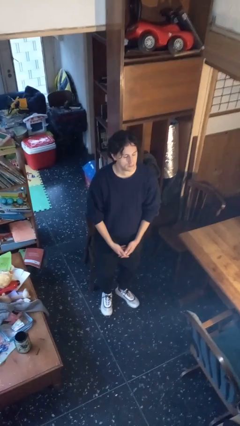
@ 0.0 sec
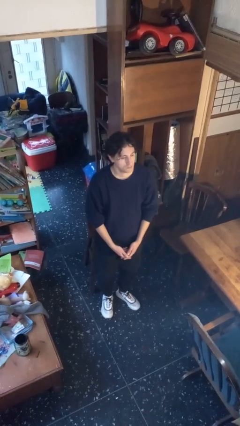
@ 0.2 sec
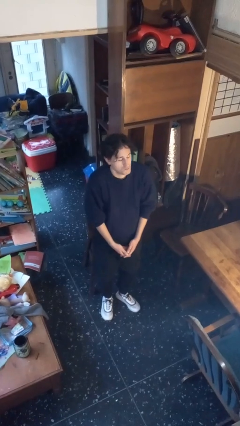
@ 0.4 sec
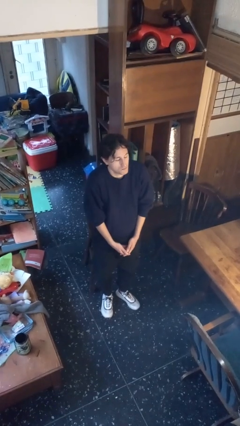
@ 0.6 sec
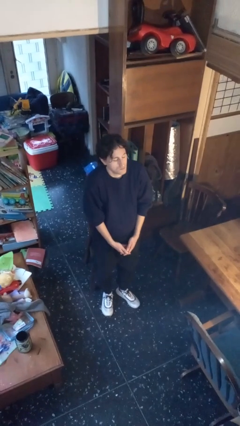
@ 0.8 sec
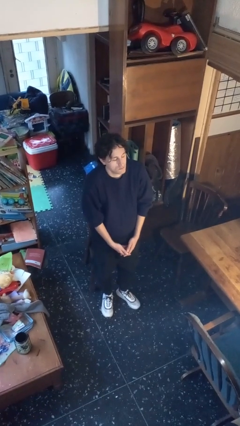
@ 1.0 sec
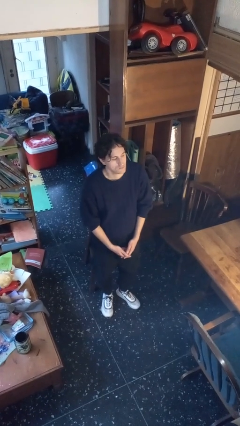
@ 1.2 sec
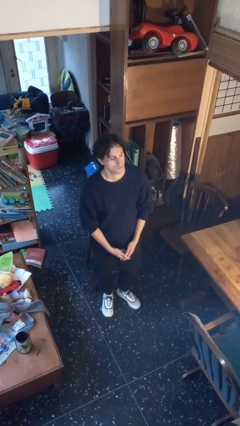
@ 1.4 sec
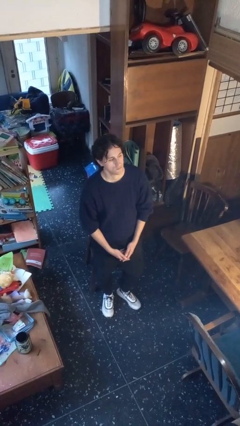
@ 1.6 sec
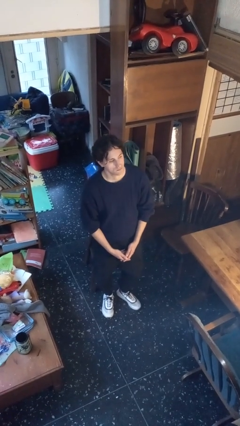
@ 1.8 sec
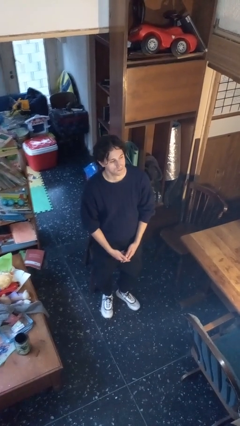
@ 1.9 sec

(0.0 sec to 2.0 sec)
person shrugs

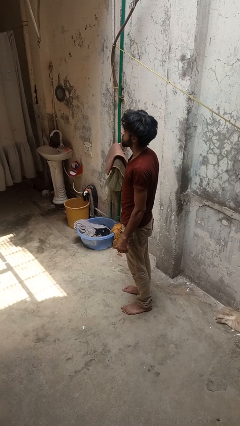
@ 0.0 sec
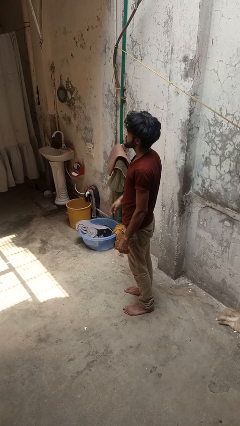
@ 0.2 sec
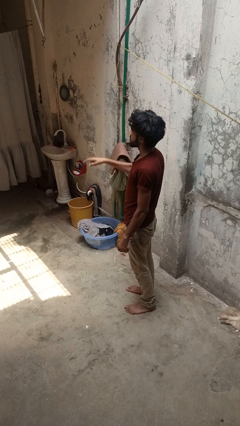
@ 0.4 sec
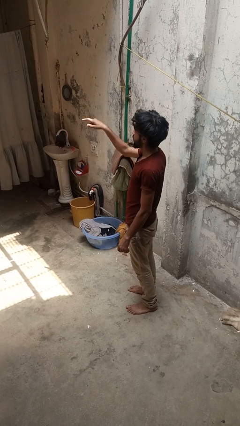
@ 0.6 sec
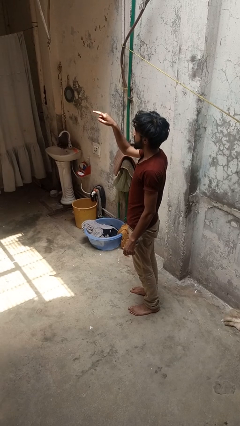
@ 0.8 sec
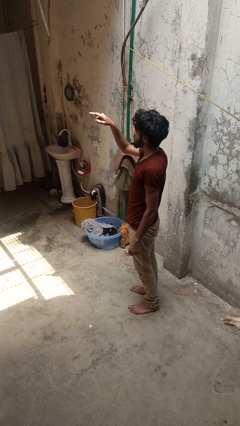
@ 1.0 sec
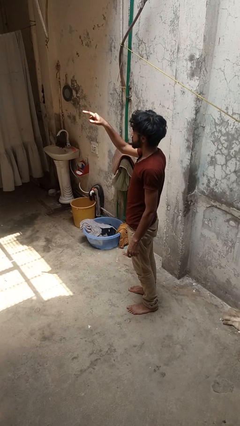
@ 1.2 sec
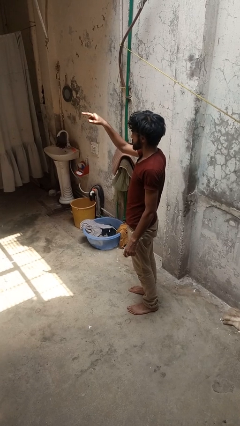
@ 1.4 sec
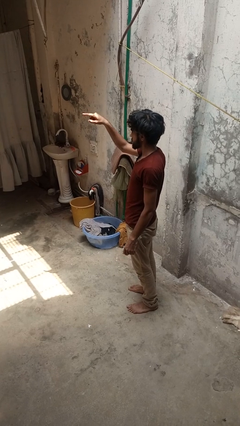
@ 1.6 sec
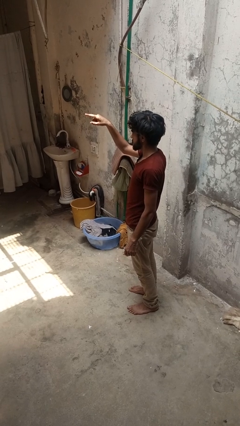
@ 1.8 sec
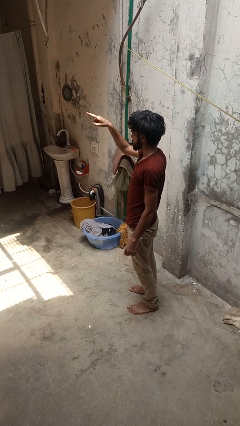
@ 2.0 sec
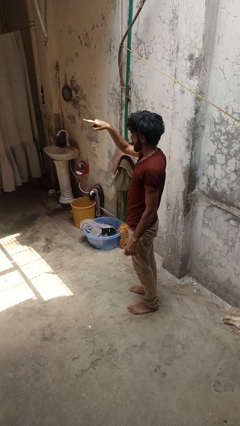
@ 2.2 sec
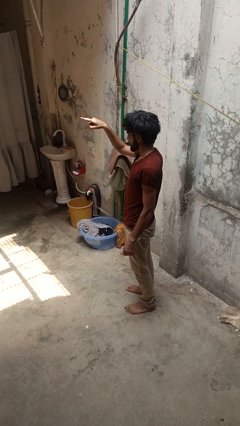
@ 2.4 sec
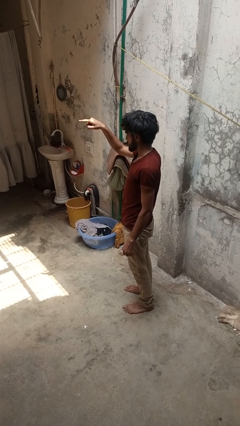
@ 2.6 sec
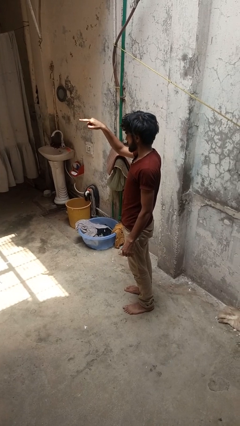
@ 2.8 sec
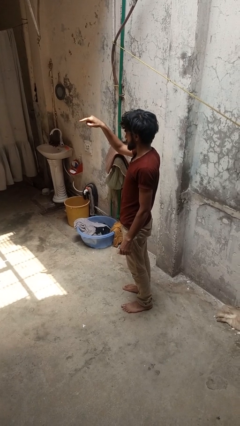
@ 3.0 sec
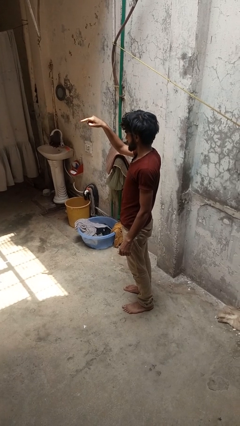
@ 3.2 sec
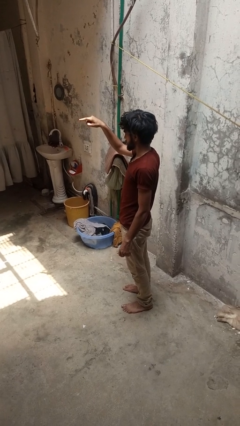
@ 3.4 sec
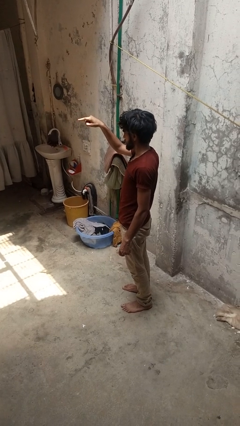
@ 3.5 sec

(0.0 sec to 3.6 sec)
person points at person

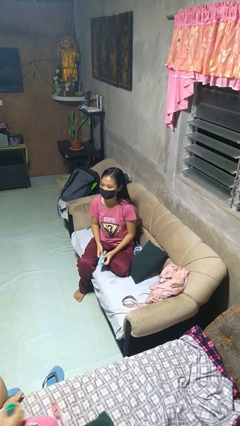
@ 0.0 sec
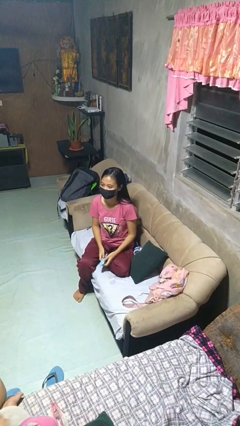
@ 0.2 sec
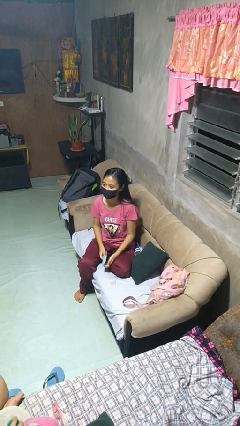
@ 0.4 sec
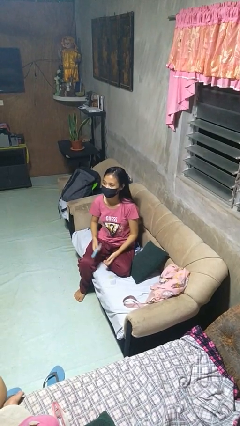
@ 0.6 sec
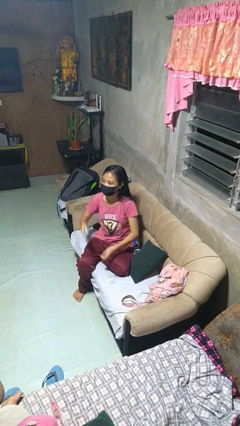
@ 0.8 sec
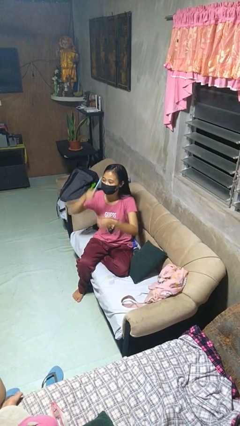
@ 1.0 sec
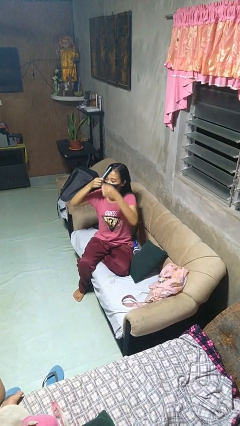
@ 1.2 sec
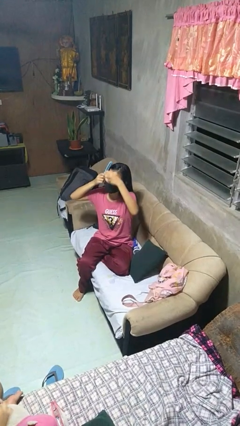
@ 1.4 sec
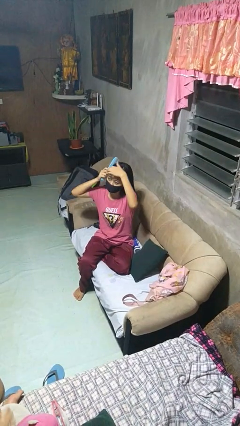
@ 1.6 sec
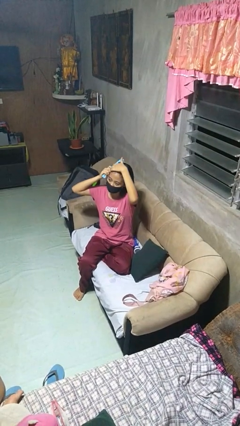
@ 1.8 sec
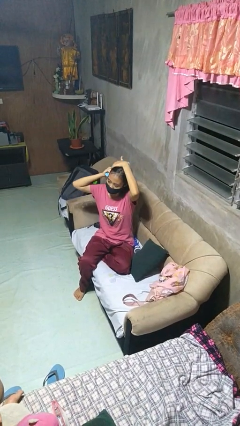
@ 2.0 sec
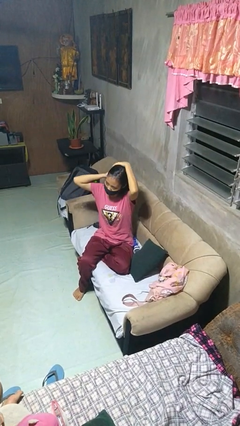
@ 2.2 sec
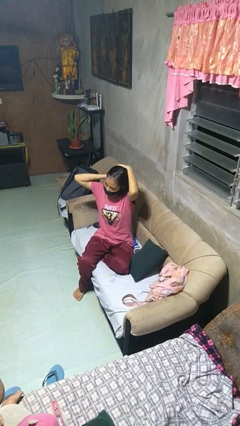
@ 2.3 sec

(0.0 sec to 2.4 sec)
person brushes hair

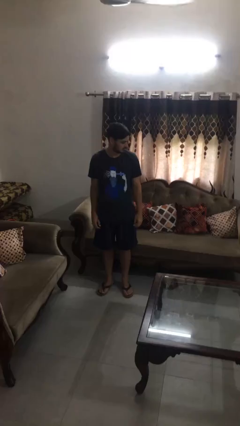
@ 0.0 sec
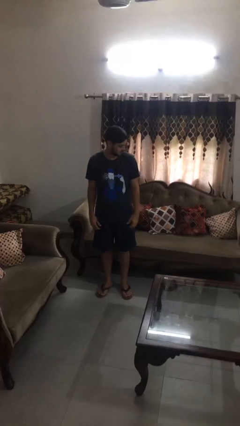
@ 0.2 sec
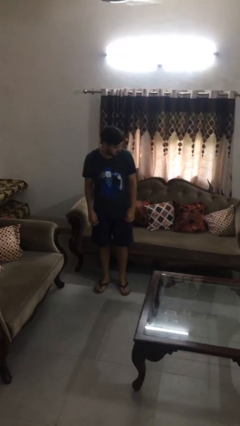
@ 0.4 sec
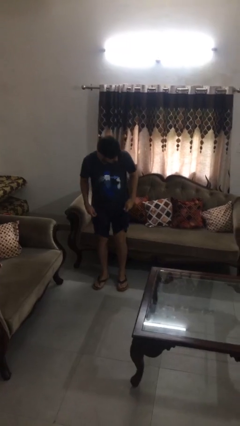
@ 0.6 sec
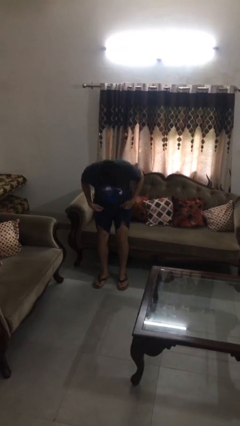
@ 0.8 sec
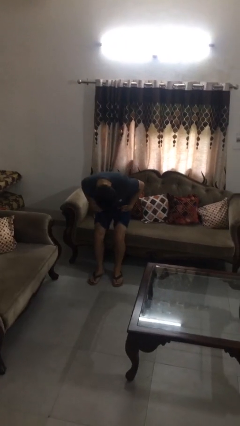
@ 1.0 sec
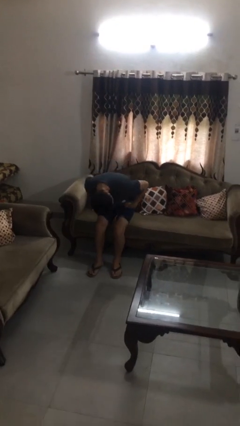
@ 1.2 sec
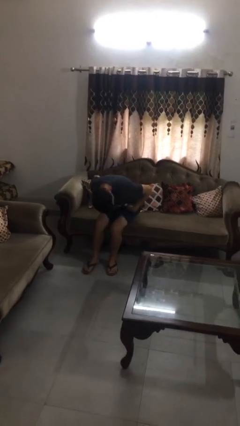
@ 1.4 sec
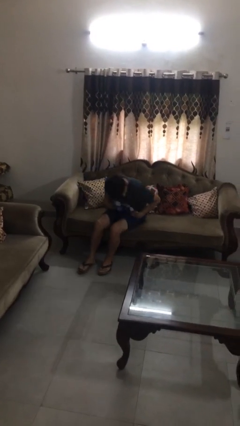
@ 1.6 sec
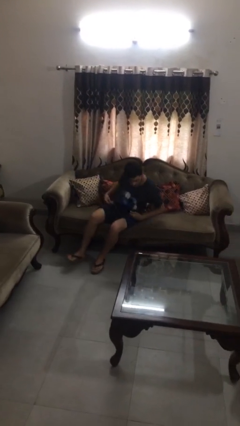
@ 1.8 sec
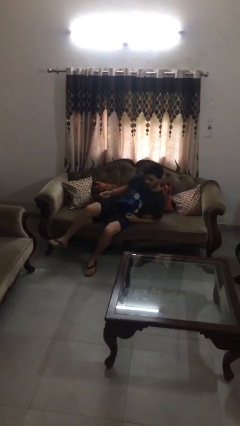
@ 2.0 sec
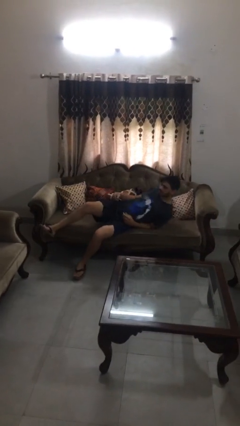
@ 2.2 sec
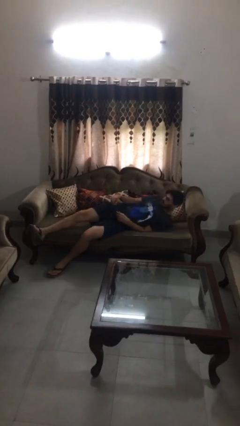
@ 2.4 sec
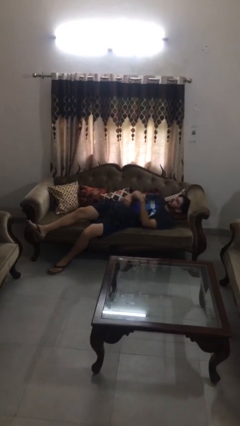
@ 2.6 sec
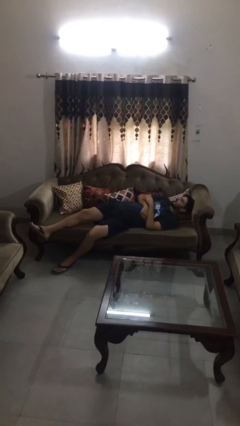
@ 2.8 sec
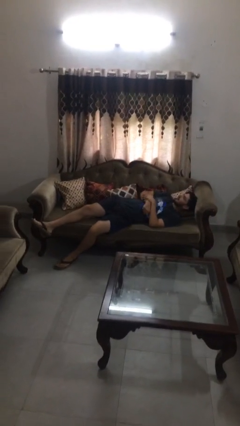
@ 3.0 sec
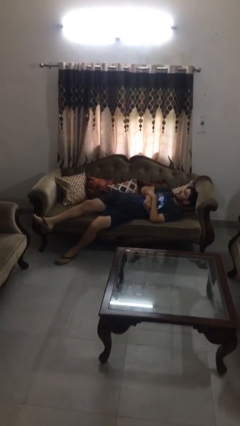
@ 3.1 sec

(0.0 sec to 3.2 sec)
person lies down on couch

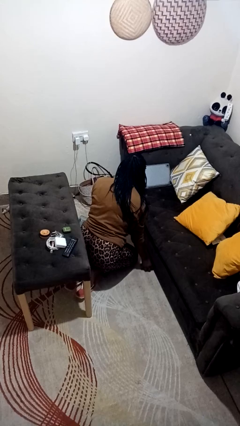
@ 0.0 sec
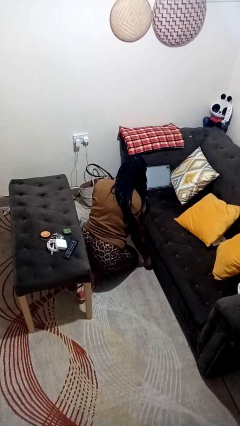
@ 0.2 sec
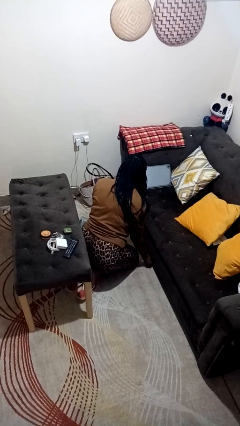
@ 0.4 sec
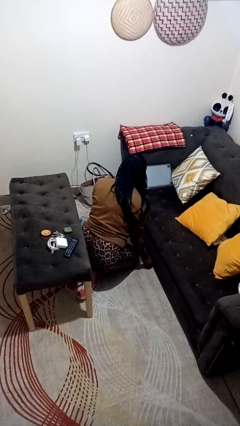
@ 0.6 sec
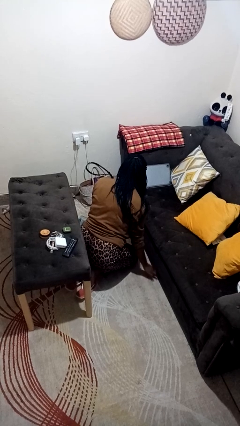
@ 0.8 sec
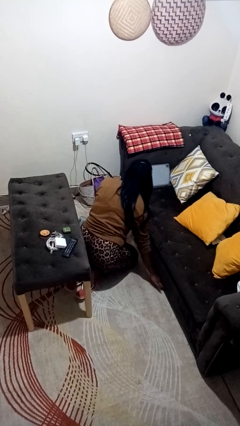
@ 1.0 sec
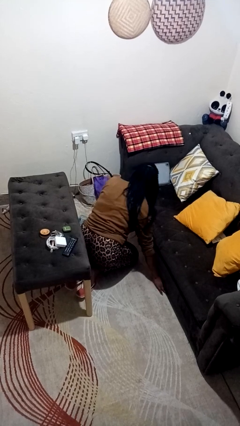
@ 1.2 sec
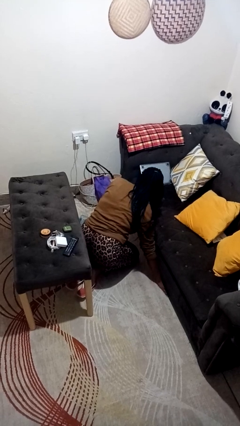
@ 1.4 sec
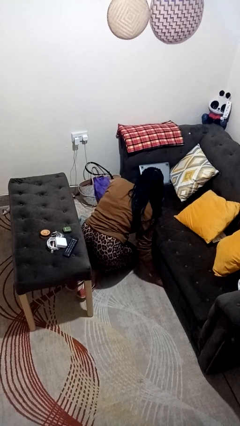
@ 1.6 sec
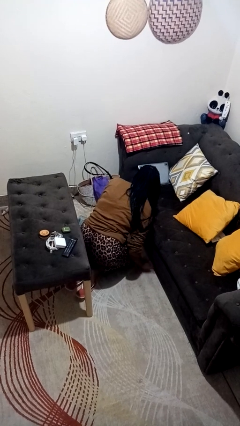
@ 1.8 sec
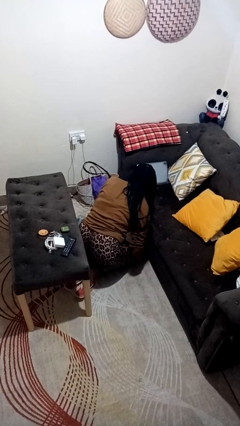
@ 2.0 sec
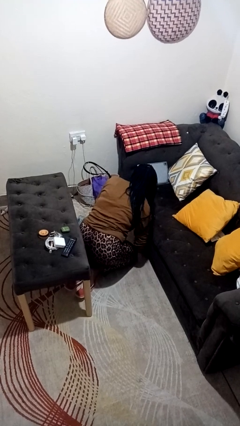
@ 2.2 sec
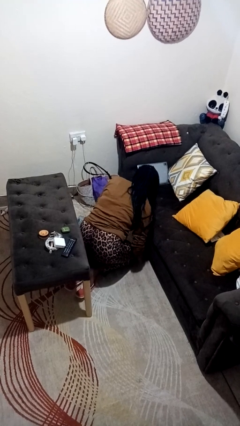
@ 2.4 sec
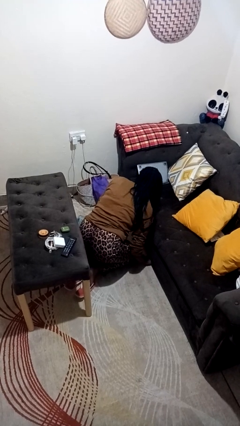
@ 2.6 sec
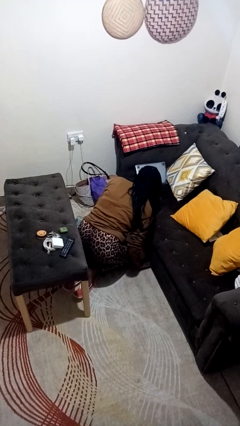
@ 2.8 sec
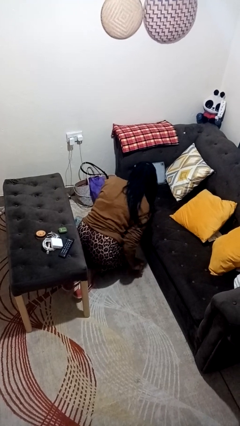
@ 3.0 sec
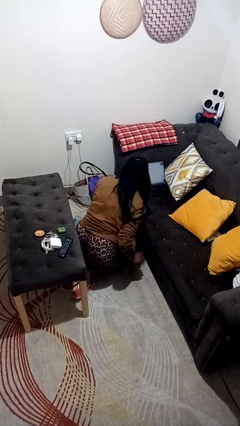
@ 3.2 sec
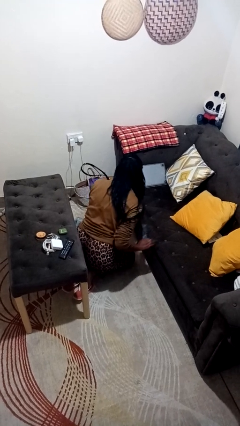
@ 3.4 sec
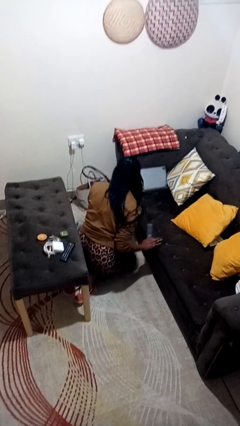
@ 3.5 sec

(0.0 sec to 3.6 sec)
person searches under couch

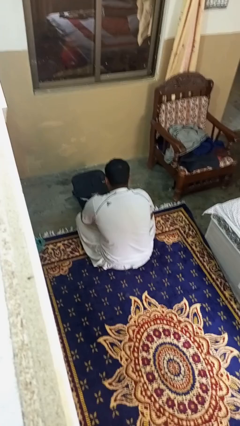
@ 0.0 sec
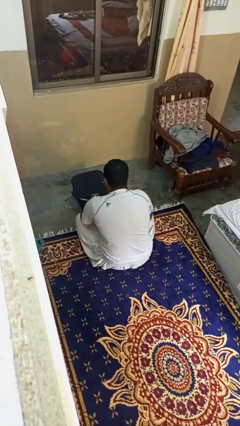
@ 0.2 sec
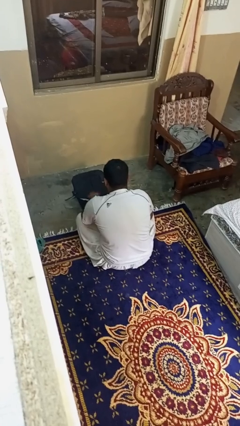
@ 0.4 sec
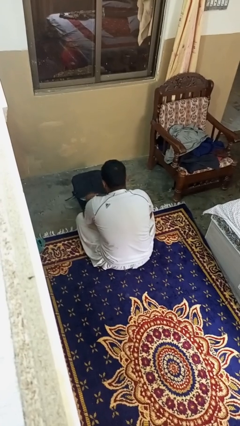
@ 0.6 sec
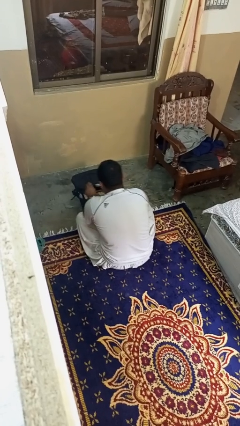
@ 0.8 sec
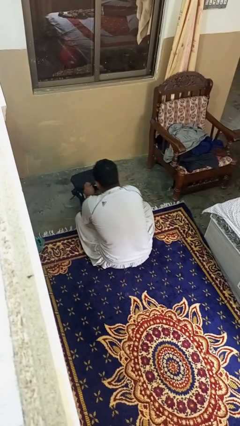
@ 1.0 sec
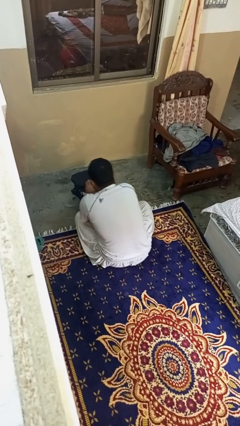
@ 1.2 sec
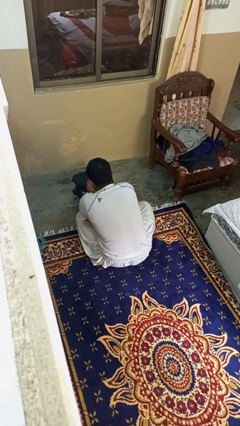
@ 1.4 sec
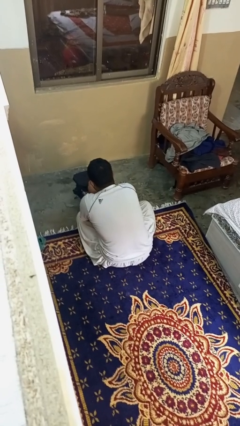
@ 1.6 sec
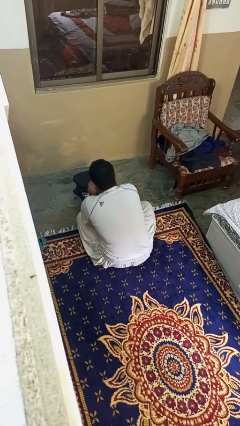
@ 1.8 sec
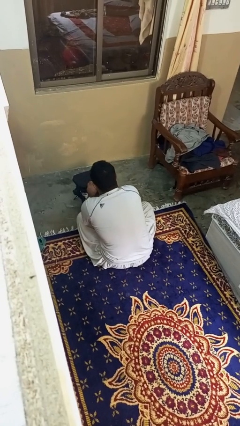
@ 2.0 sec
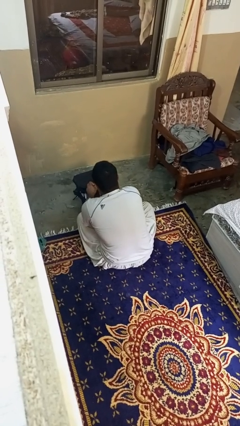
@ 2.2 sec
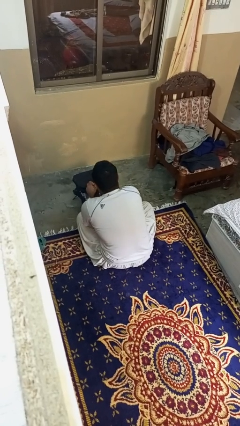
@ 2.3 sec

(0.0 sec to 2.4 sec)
person takes object from bag

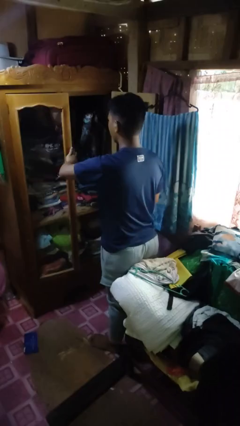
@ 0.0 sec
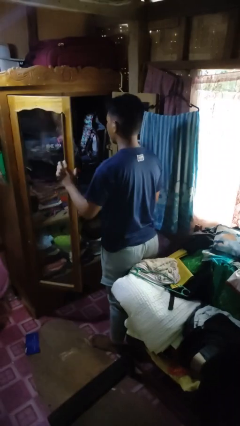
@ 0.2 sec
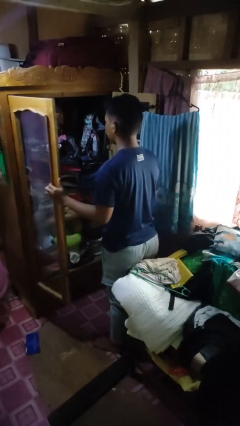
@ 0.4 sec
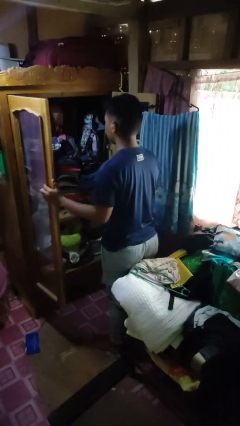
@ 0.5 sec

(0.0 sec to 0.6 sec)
person opens closet door
